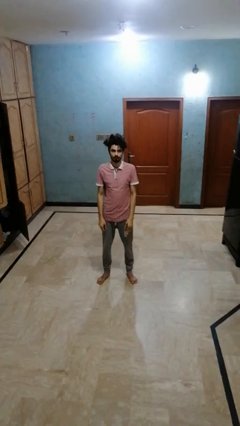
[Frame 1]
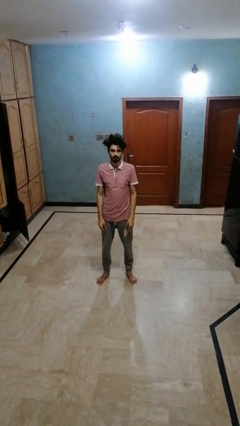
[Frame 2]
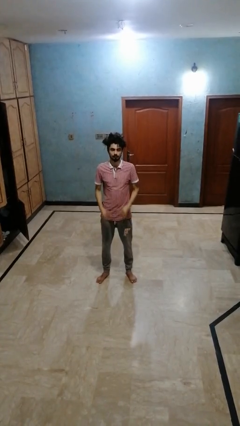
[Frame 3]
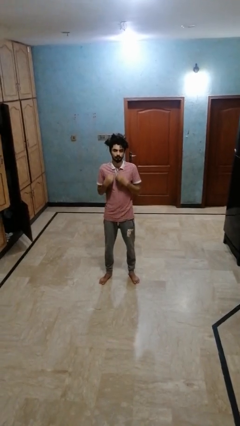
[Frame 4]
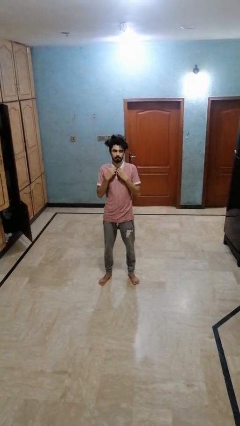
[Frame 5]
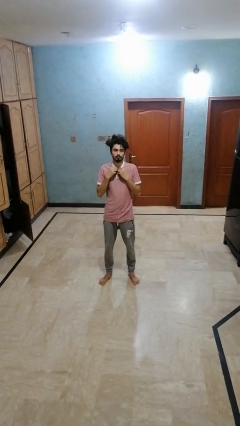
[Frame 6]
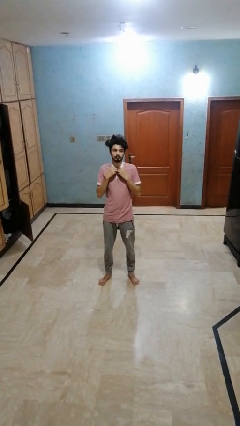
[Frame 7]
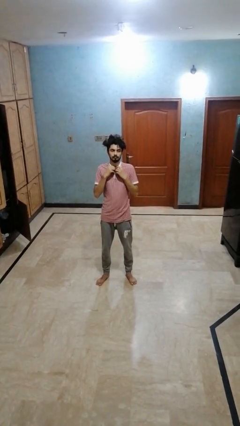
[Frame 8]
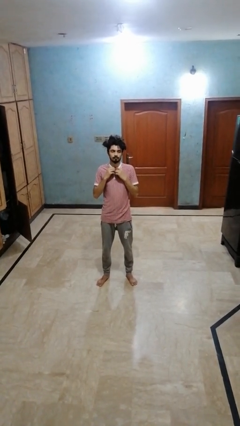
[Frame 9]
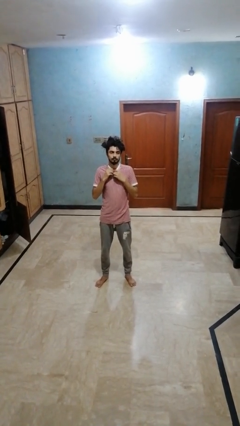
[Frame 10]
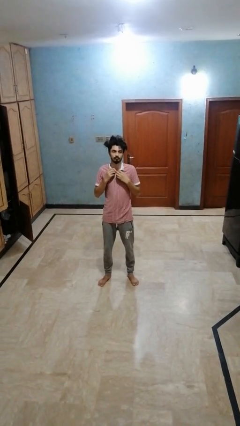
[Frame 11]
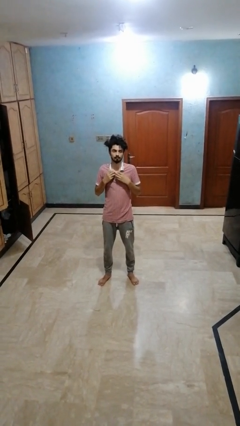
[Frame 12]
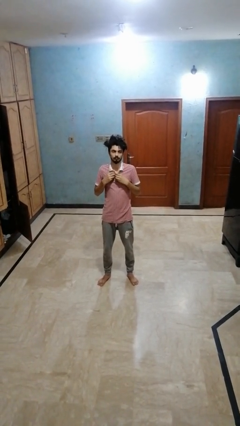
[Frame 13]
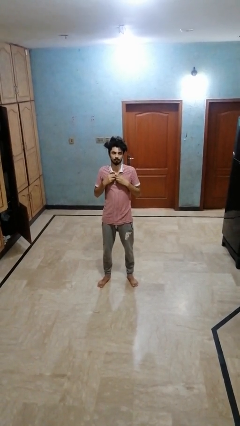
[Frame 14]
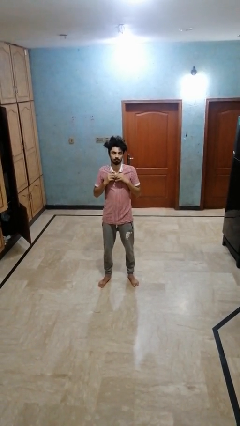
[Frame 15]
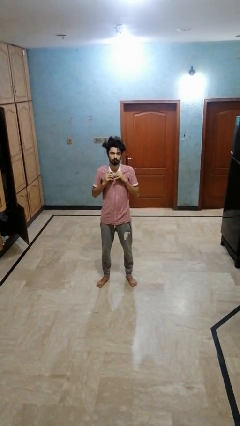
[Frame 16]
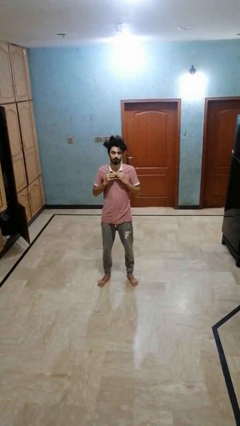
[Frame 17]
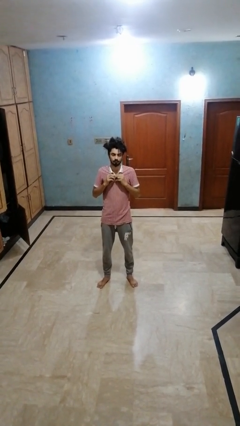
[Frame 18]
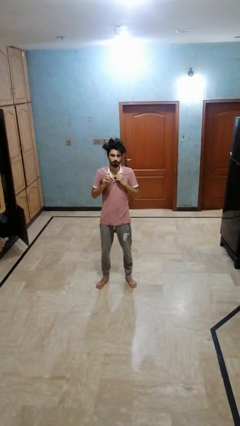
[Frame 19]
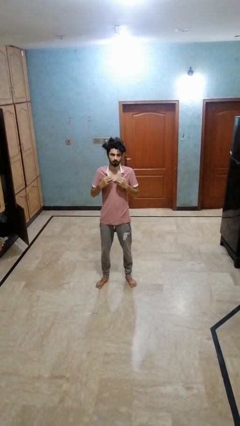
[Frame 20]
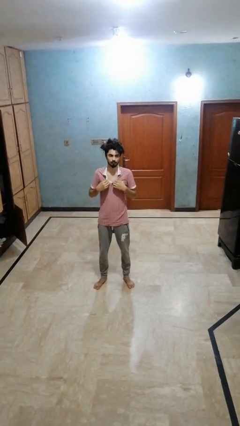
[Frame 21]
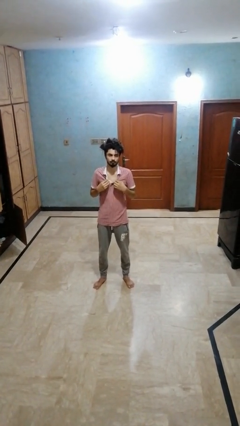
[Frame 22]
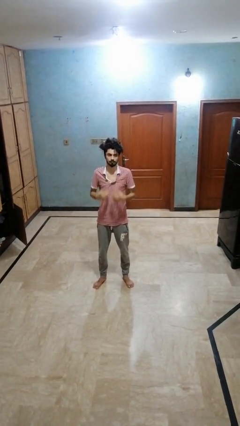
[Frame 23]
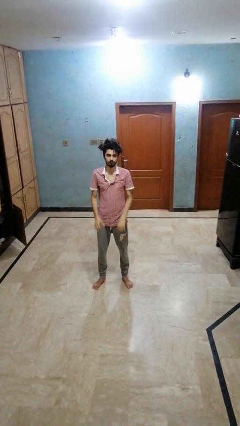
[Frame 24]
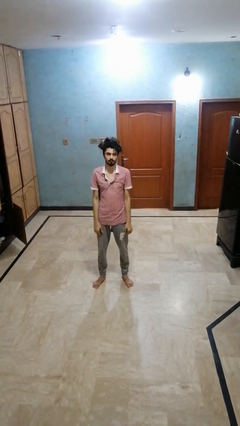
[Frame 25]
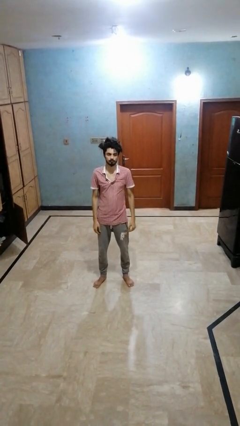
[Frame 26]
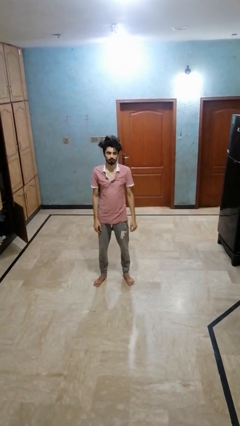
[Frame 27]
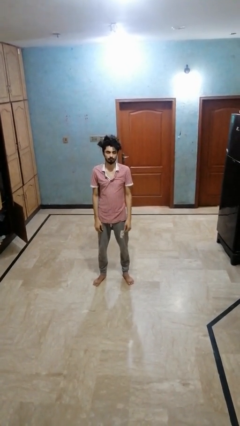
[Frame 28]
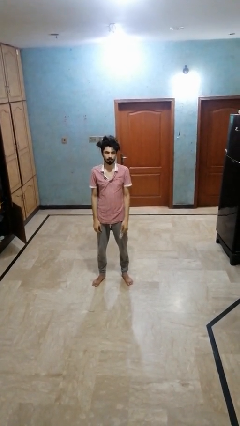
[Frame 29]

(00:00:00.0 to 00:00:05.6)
person unbuttons shirt

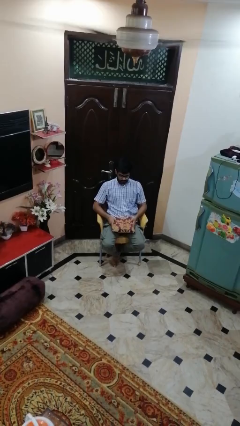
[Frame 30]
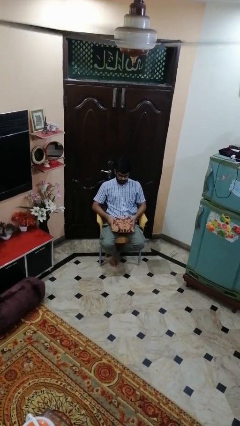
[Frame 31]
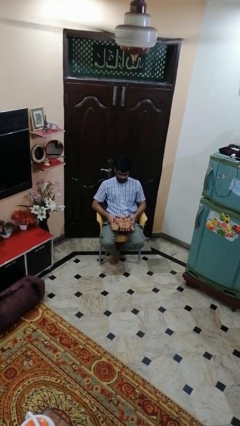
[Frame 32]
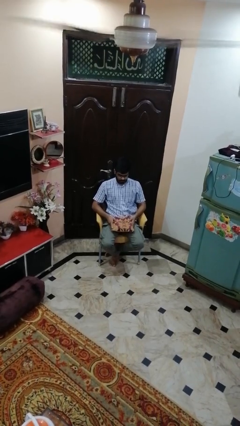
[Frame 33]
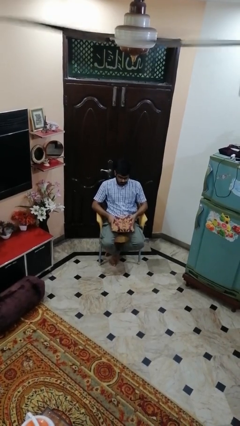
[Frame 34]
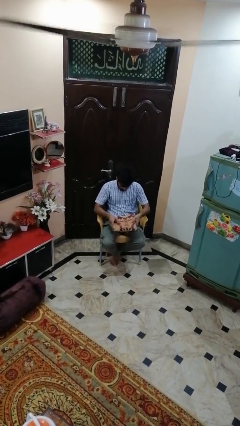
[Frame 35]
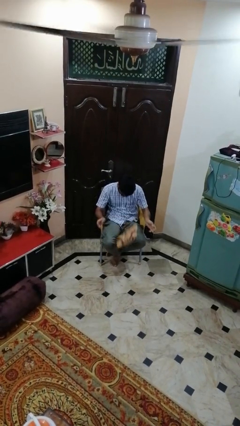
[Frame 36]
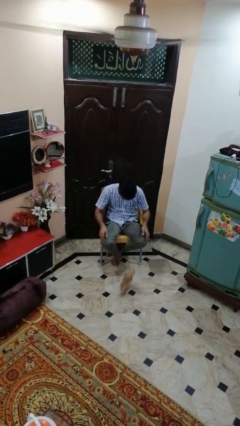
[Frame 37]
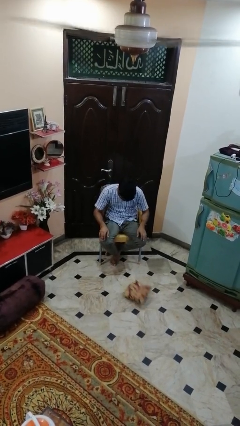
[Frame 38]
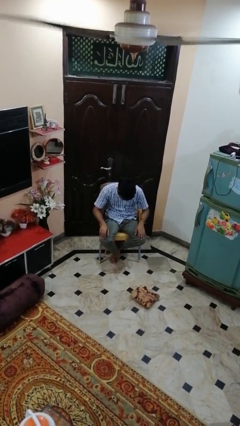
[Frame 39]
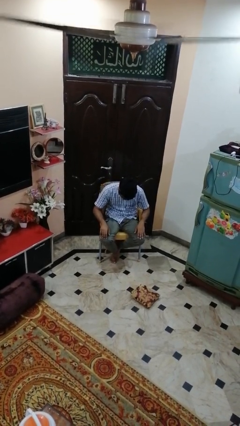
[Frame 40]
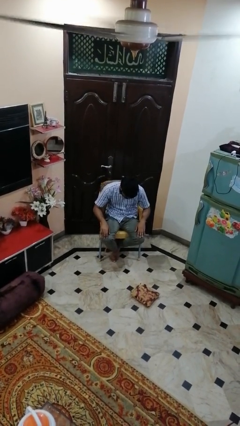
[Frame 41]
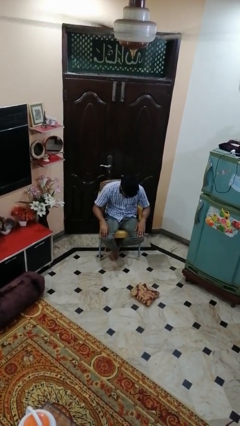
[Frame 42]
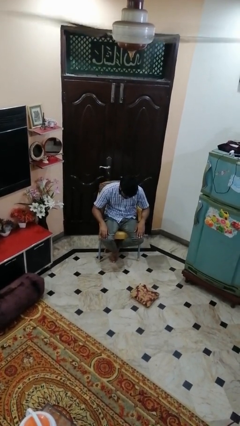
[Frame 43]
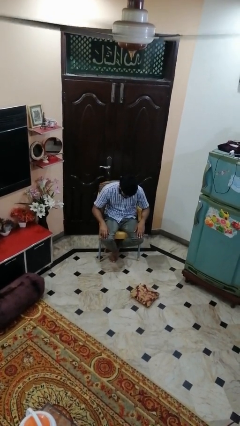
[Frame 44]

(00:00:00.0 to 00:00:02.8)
person drops object

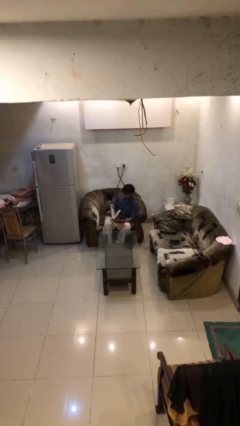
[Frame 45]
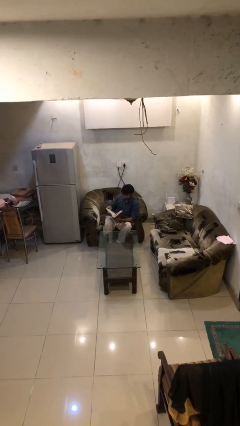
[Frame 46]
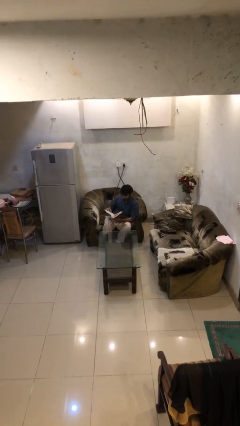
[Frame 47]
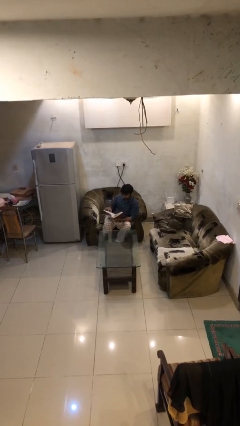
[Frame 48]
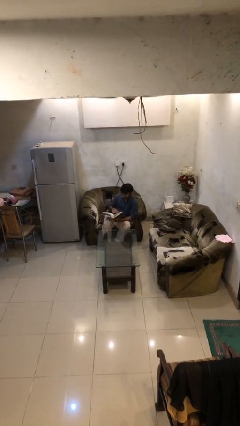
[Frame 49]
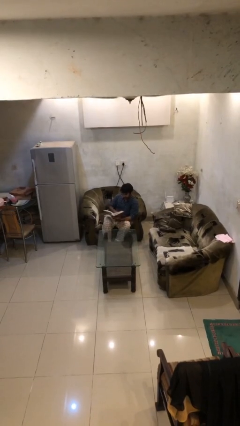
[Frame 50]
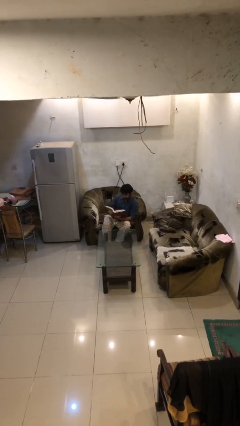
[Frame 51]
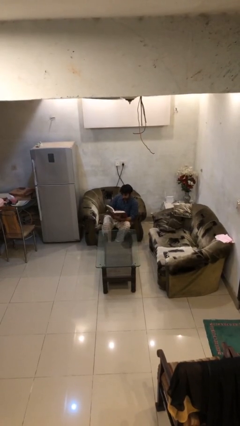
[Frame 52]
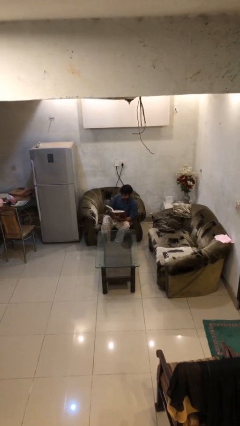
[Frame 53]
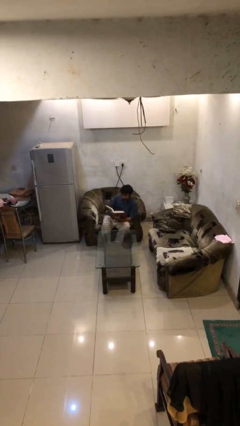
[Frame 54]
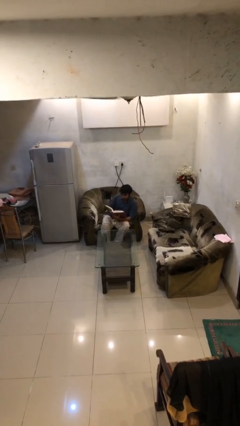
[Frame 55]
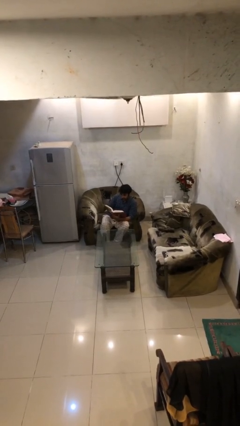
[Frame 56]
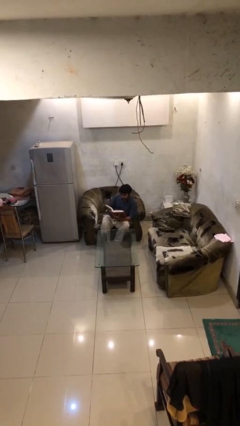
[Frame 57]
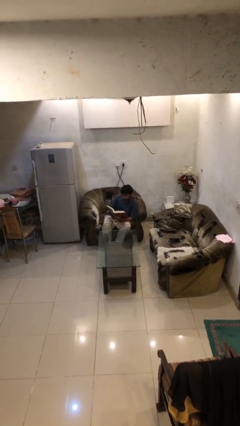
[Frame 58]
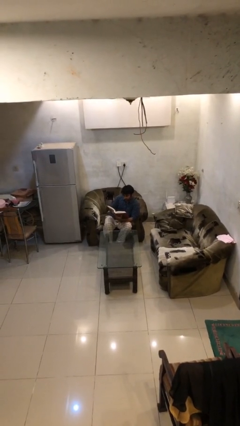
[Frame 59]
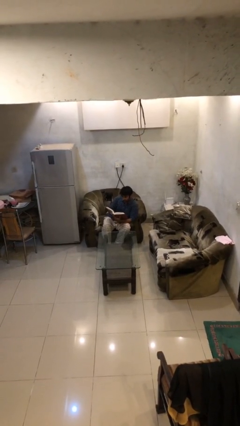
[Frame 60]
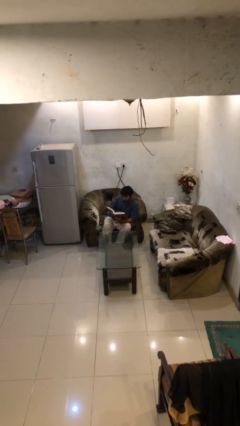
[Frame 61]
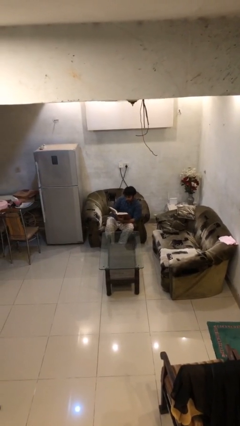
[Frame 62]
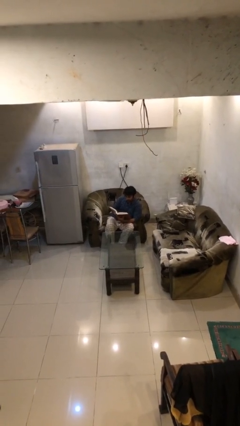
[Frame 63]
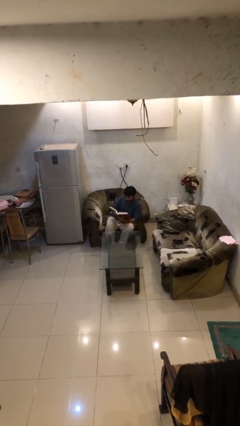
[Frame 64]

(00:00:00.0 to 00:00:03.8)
person reads document

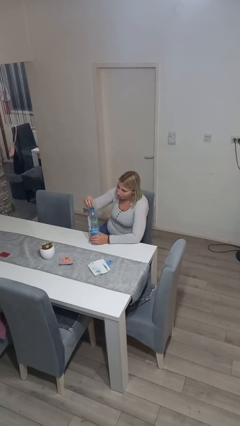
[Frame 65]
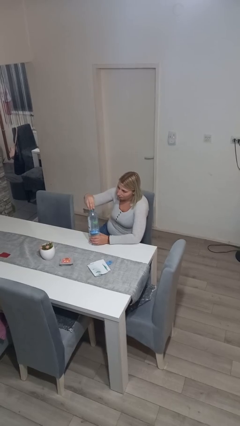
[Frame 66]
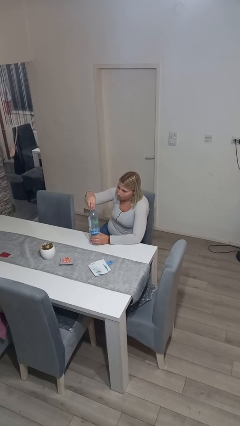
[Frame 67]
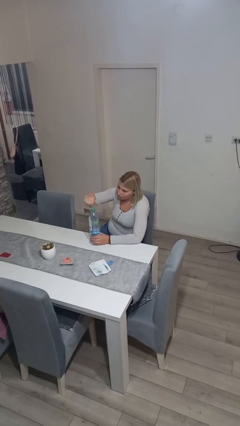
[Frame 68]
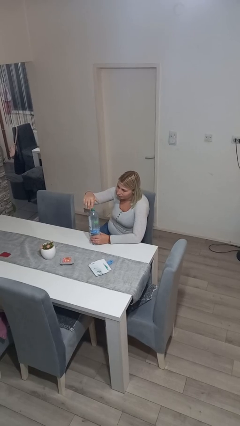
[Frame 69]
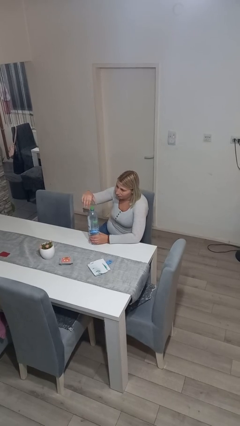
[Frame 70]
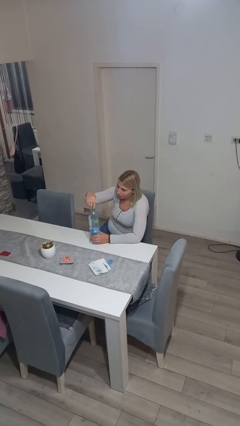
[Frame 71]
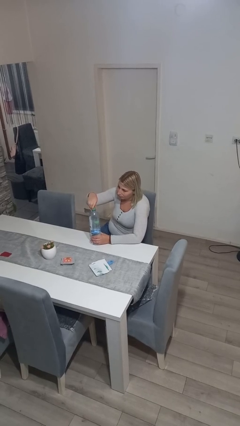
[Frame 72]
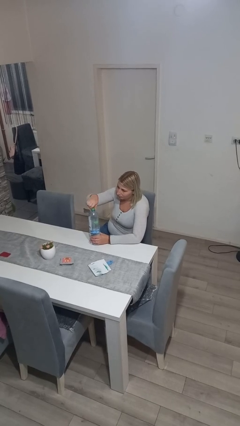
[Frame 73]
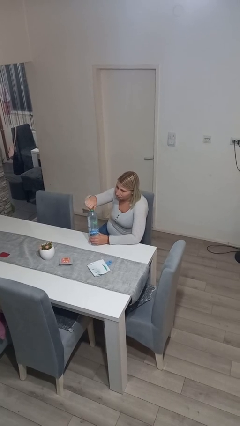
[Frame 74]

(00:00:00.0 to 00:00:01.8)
person screws lid to bottle

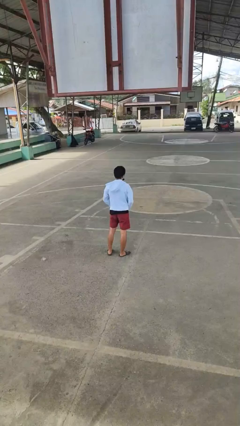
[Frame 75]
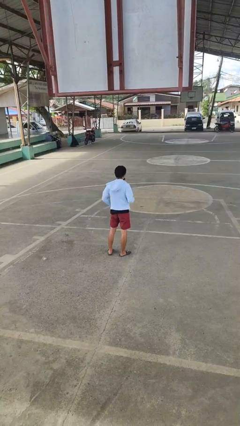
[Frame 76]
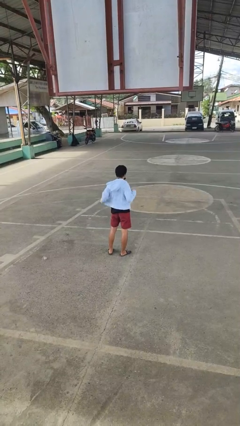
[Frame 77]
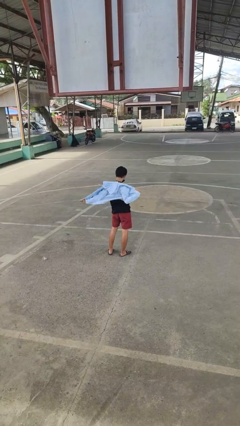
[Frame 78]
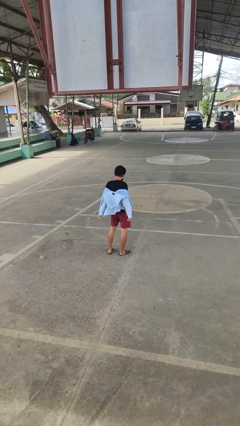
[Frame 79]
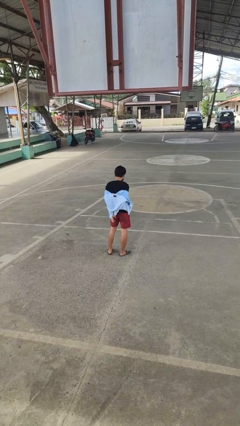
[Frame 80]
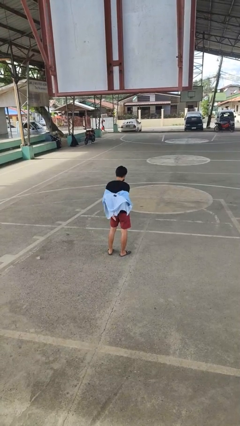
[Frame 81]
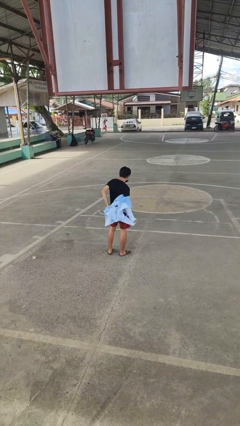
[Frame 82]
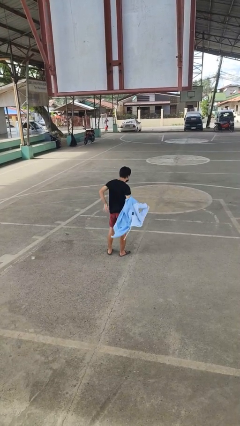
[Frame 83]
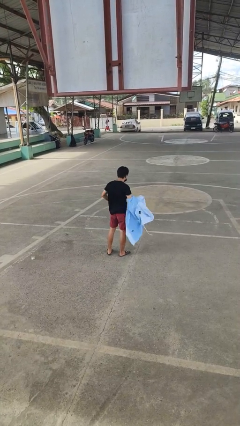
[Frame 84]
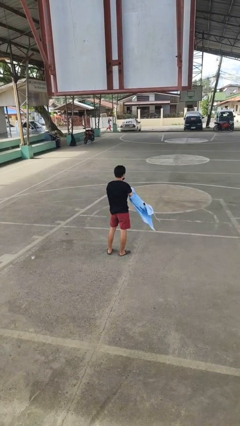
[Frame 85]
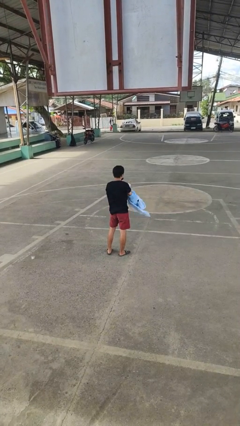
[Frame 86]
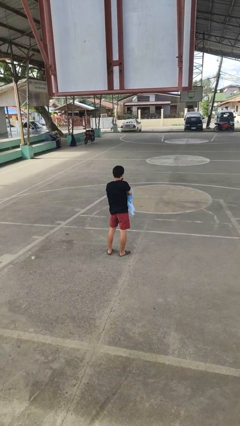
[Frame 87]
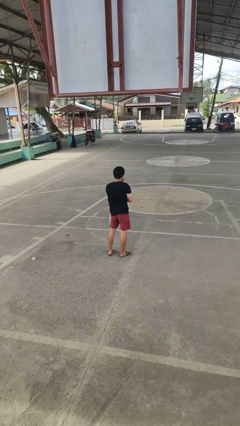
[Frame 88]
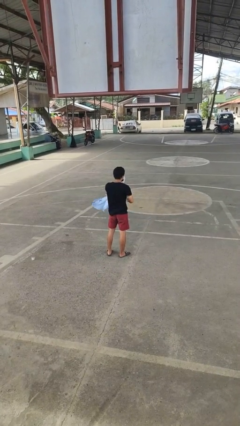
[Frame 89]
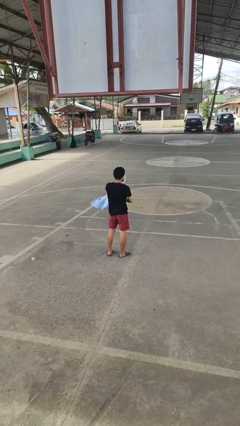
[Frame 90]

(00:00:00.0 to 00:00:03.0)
person takes off jacket

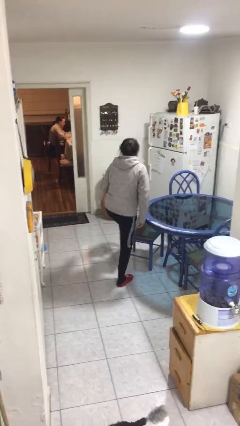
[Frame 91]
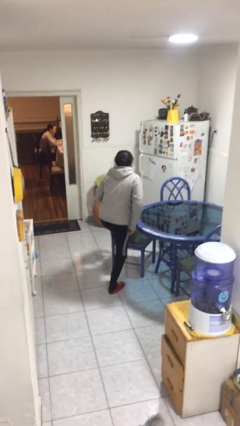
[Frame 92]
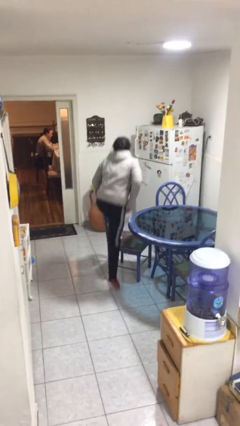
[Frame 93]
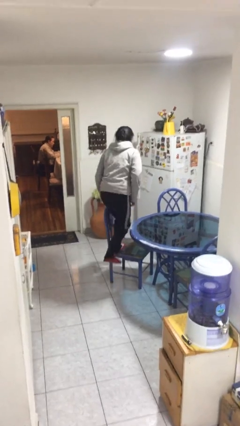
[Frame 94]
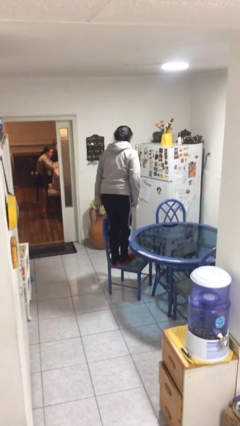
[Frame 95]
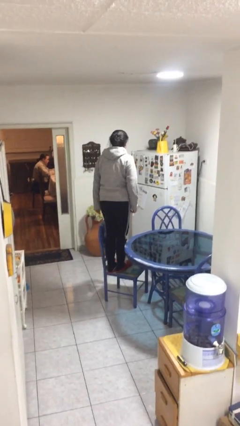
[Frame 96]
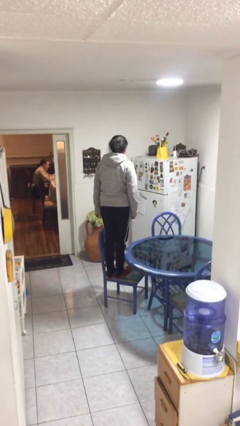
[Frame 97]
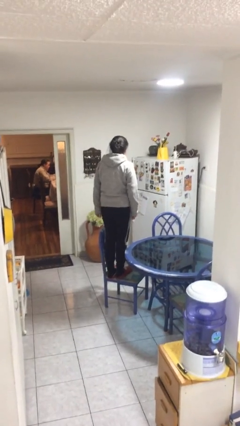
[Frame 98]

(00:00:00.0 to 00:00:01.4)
person climbs on chair
